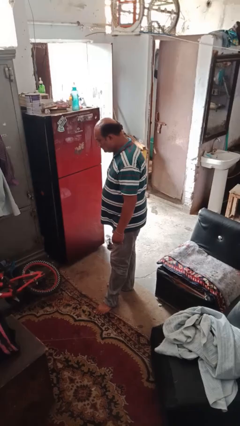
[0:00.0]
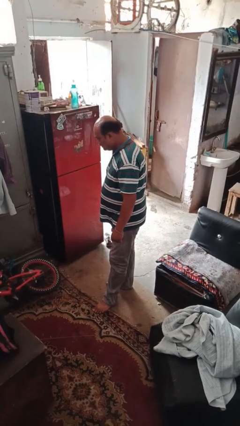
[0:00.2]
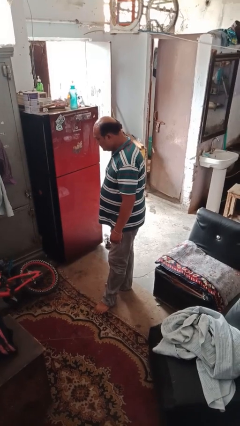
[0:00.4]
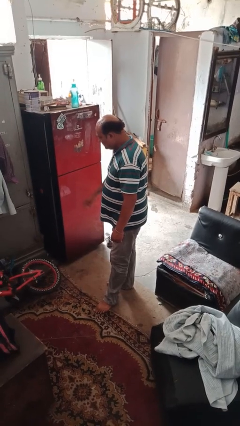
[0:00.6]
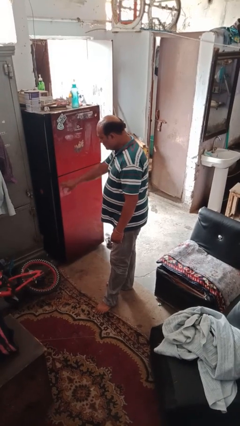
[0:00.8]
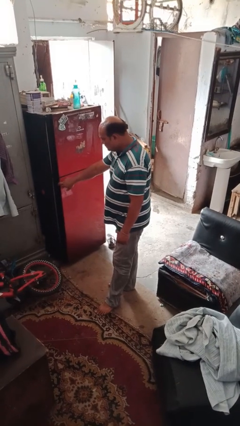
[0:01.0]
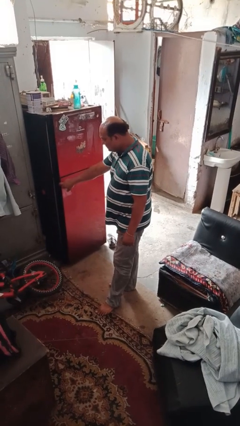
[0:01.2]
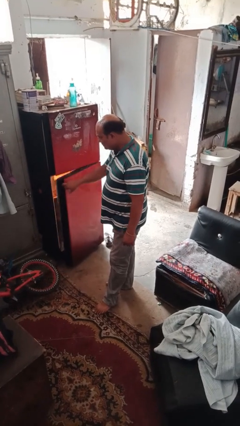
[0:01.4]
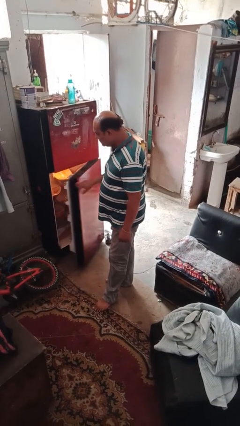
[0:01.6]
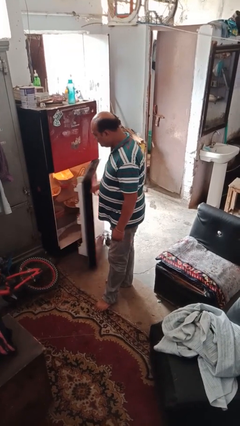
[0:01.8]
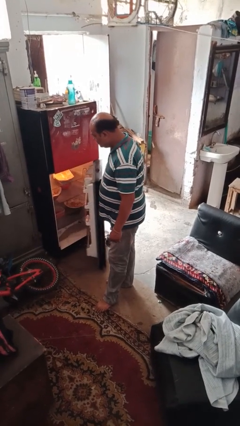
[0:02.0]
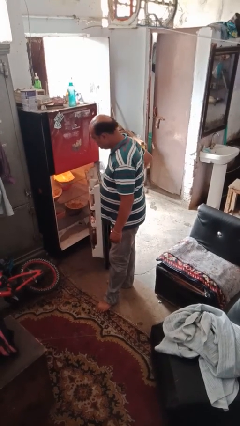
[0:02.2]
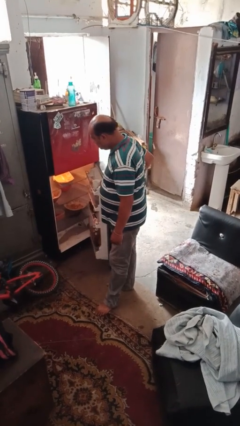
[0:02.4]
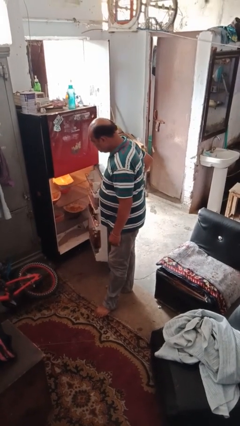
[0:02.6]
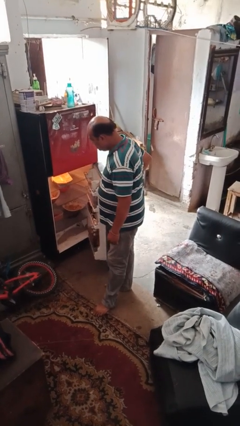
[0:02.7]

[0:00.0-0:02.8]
person opens refrigerator

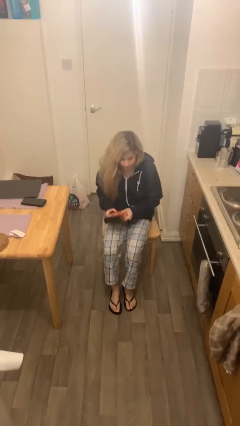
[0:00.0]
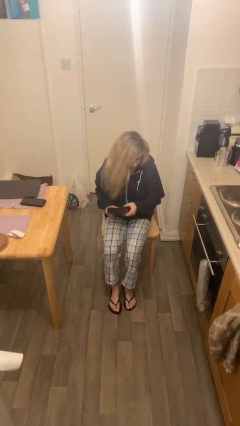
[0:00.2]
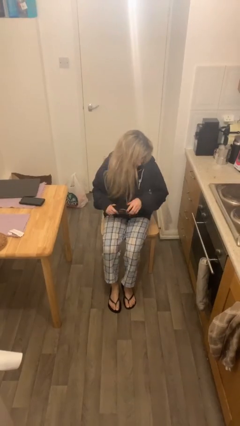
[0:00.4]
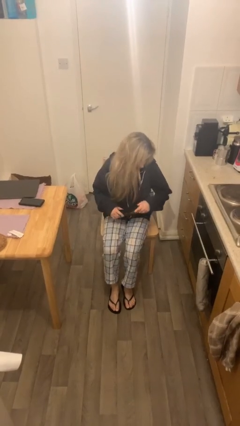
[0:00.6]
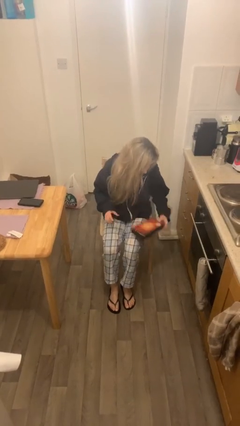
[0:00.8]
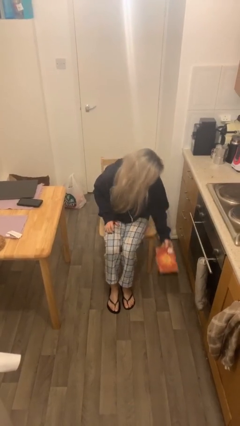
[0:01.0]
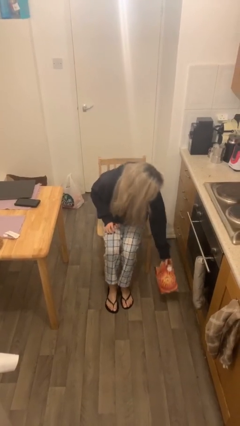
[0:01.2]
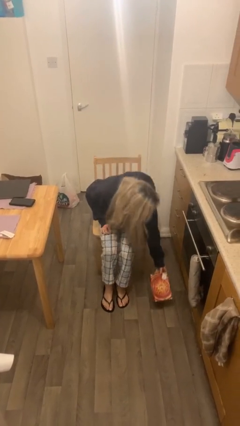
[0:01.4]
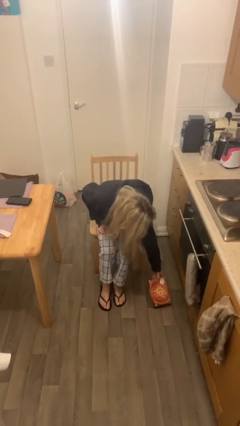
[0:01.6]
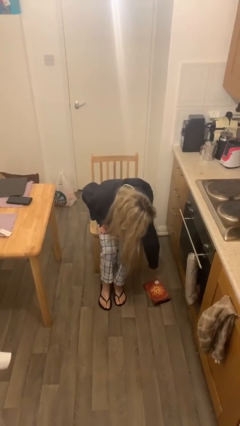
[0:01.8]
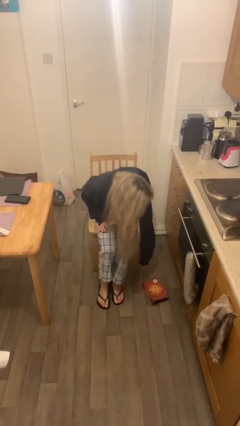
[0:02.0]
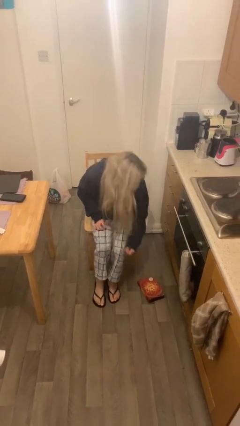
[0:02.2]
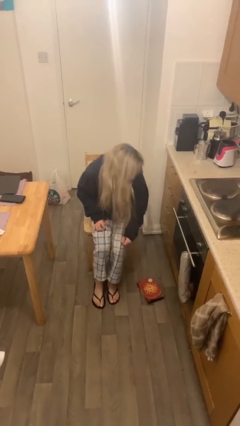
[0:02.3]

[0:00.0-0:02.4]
person puts down object on floor

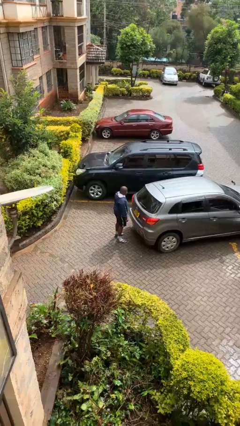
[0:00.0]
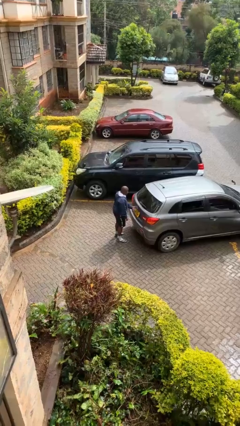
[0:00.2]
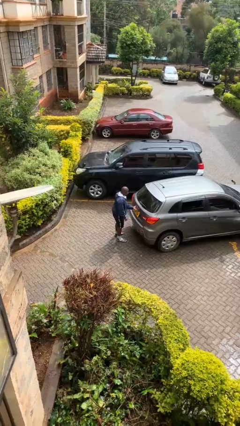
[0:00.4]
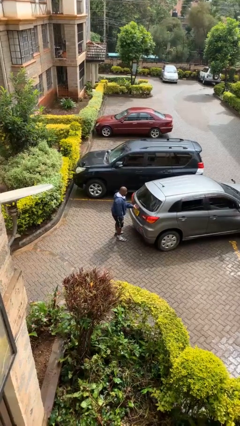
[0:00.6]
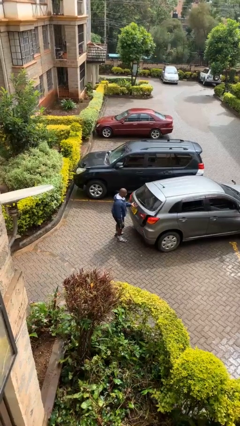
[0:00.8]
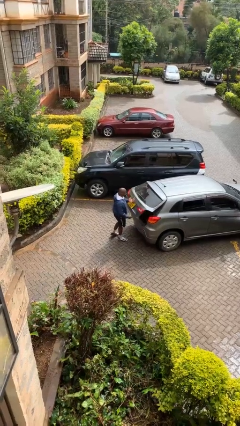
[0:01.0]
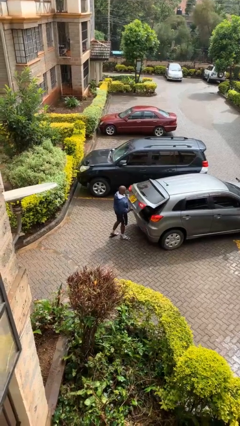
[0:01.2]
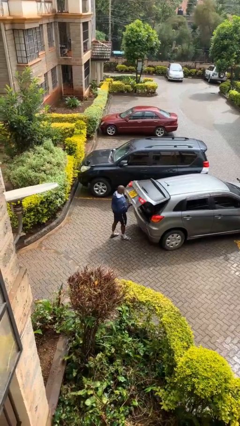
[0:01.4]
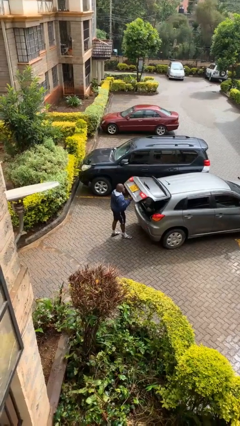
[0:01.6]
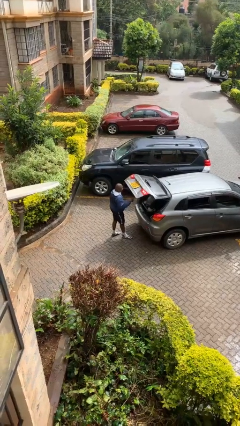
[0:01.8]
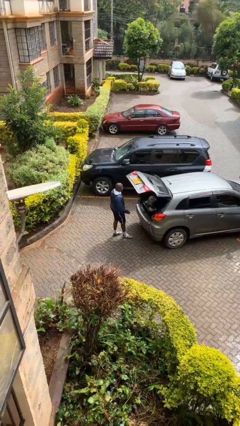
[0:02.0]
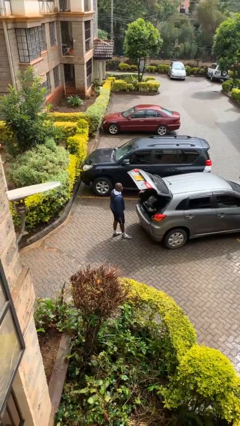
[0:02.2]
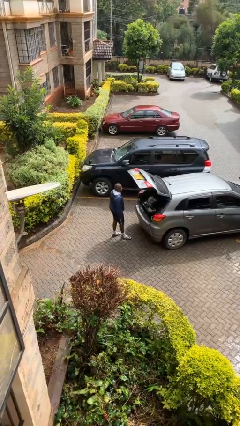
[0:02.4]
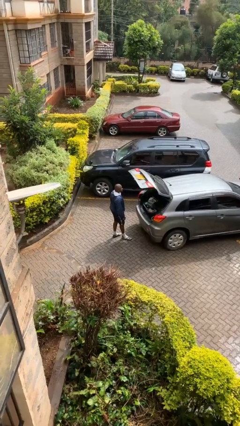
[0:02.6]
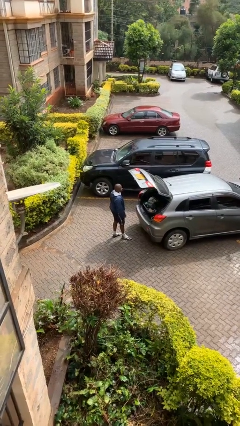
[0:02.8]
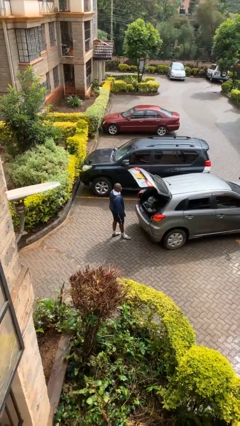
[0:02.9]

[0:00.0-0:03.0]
person opens car trunk

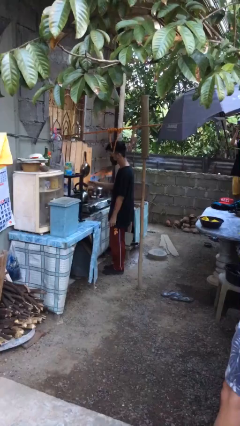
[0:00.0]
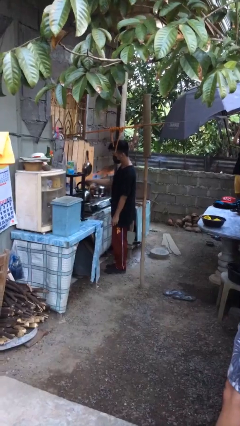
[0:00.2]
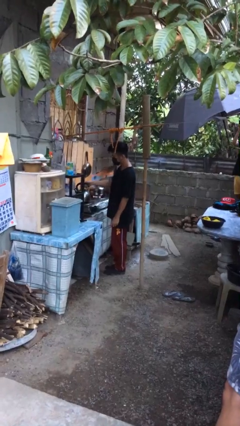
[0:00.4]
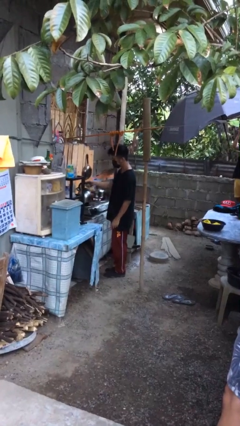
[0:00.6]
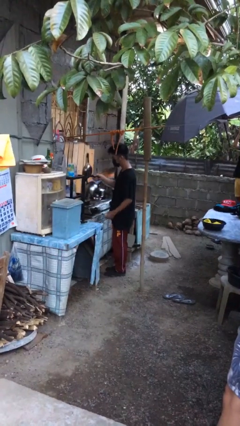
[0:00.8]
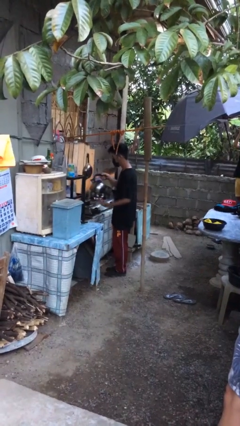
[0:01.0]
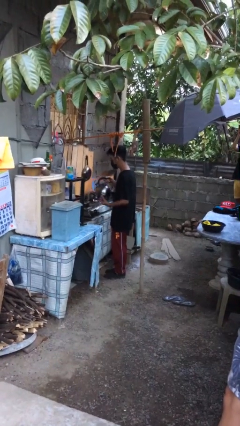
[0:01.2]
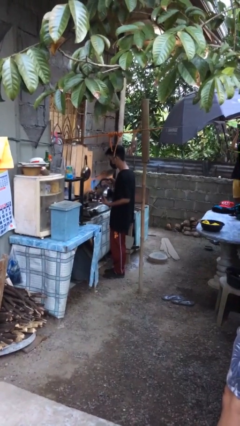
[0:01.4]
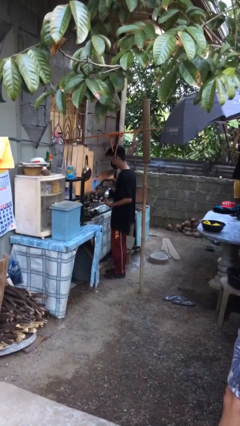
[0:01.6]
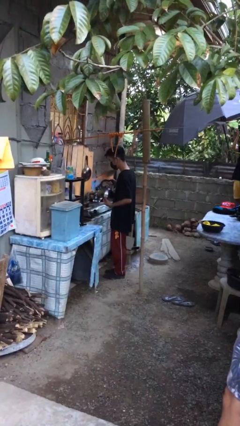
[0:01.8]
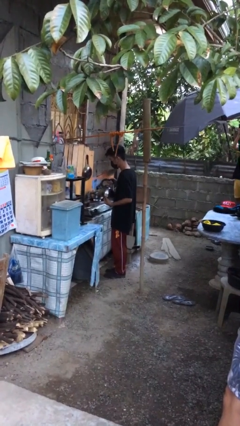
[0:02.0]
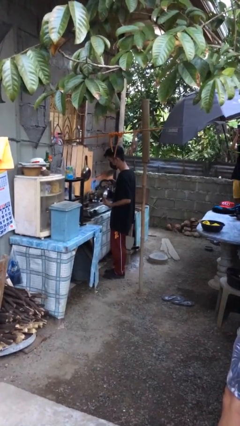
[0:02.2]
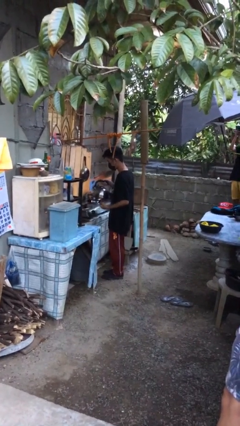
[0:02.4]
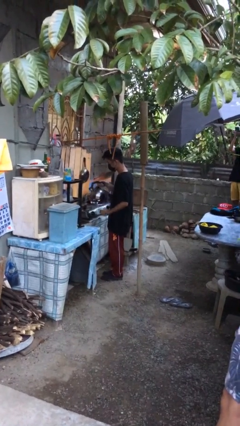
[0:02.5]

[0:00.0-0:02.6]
person picks up object from countertop

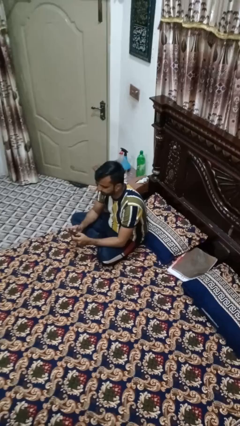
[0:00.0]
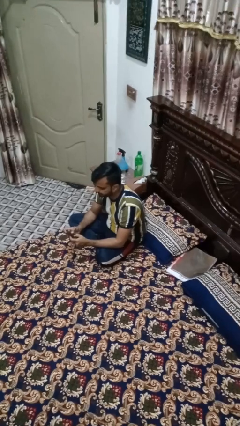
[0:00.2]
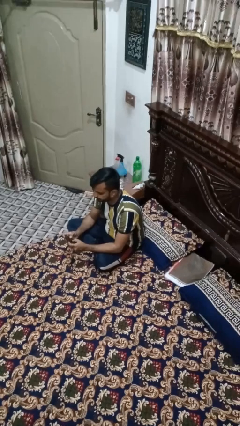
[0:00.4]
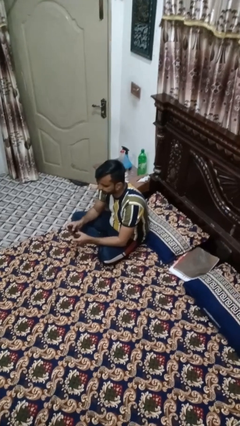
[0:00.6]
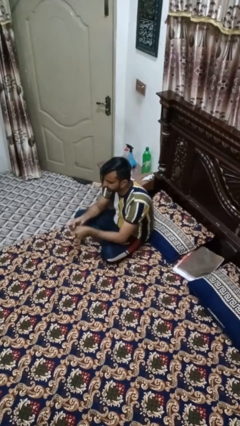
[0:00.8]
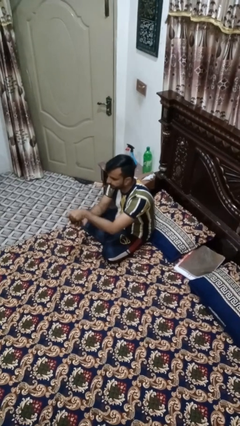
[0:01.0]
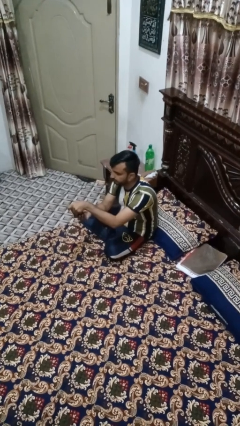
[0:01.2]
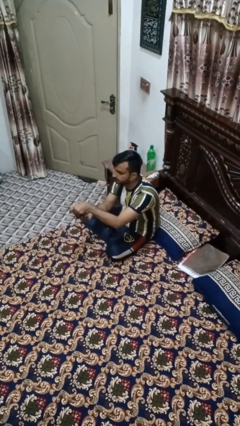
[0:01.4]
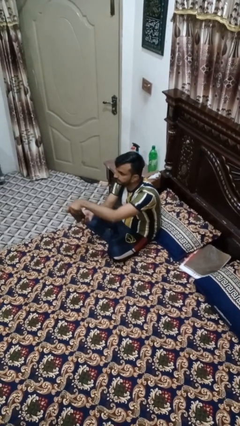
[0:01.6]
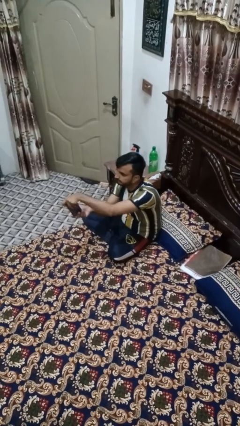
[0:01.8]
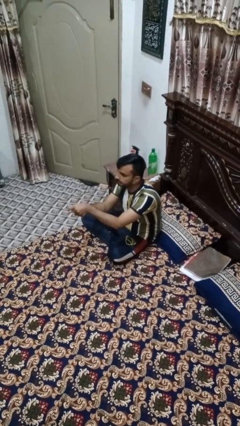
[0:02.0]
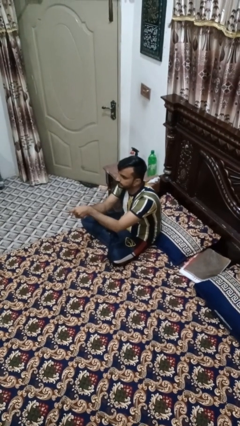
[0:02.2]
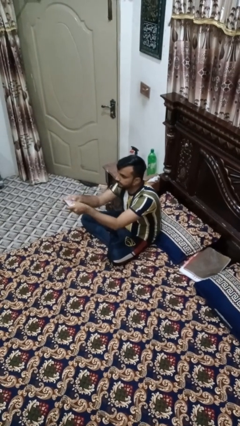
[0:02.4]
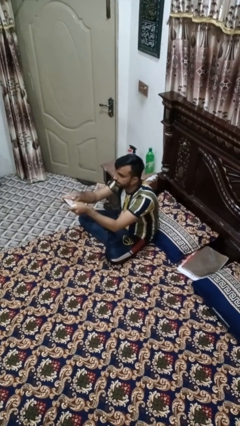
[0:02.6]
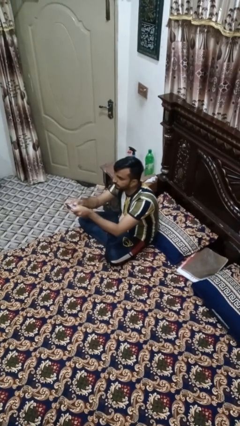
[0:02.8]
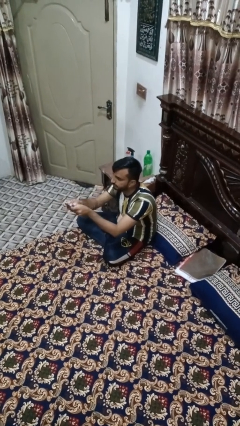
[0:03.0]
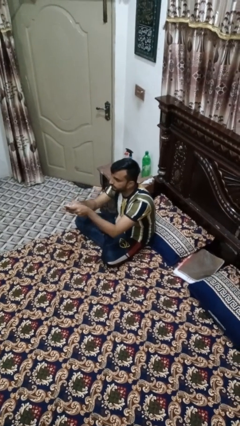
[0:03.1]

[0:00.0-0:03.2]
person interacts with handheld game

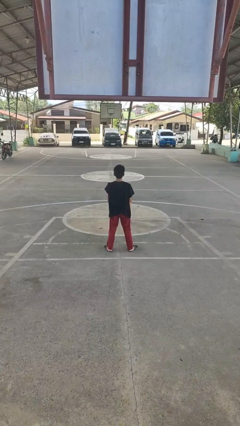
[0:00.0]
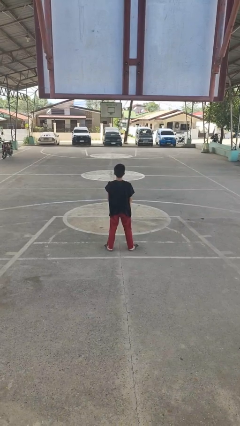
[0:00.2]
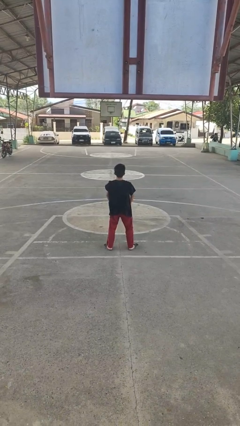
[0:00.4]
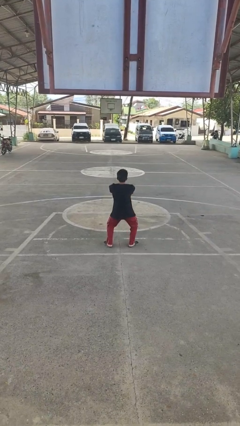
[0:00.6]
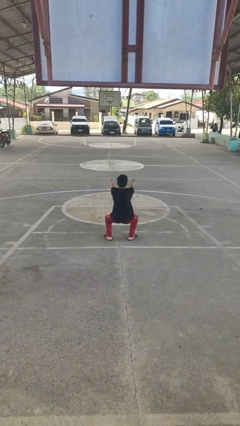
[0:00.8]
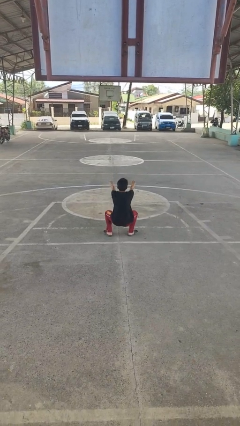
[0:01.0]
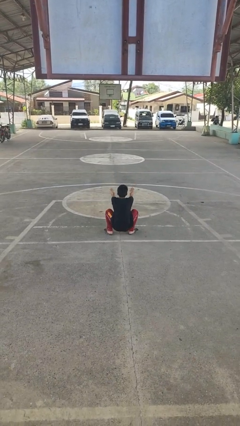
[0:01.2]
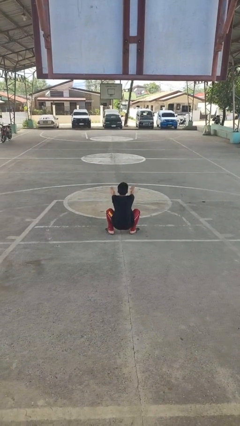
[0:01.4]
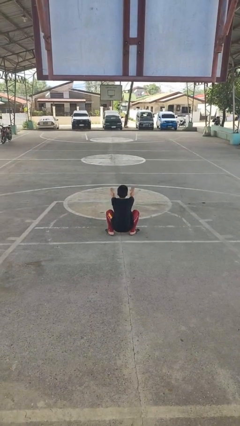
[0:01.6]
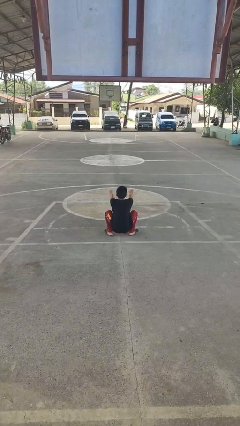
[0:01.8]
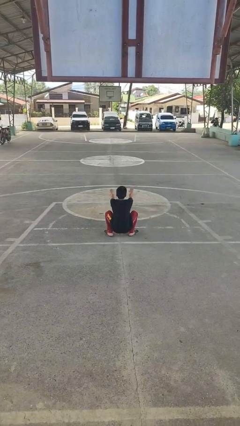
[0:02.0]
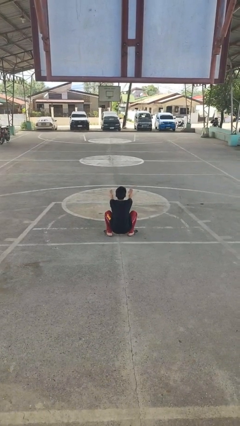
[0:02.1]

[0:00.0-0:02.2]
person squats

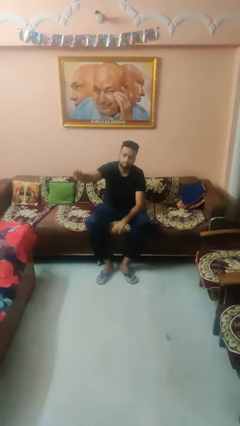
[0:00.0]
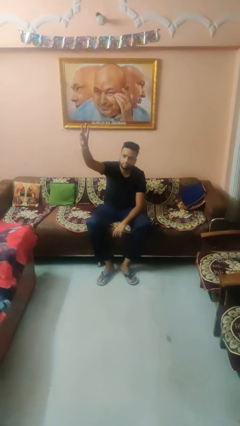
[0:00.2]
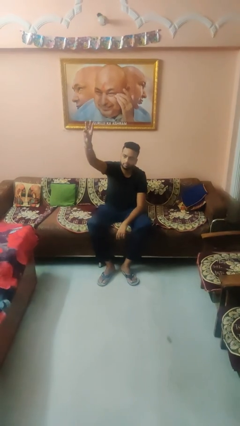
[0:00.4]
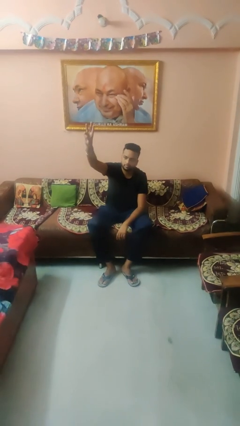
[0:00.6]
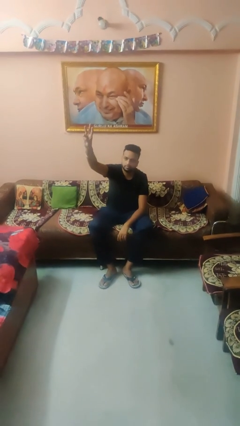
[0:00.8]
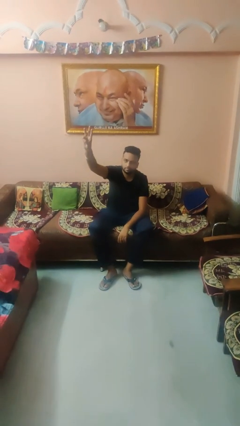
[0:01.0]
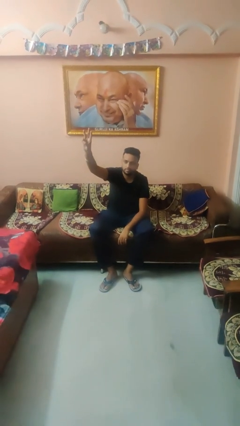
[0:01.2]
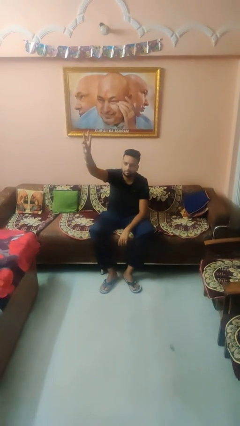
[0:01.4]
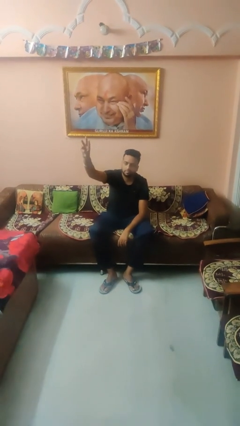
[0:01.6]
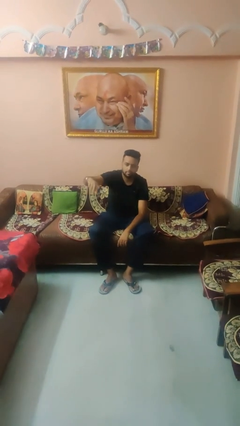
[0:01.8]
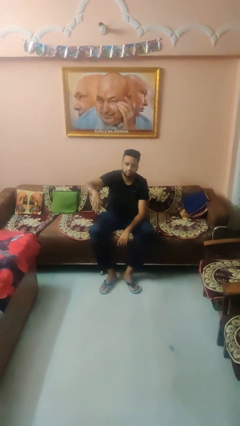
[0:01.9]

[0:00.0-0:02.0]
person gestures number three
